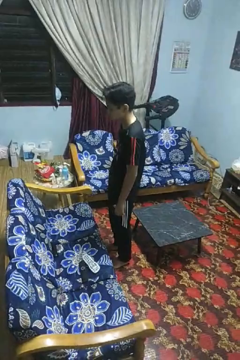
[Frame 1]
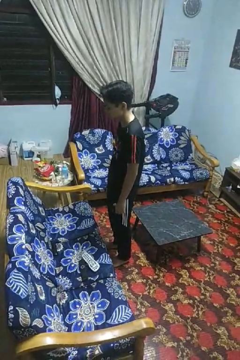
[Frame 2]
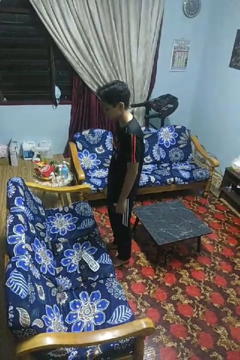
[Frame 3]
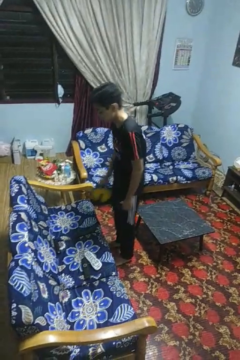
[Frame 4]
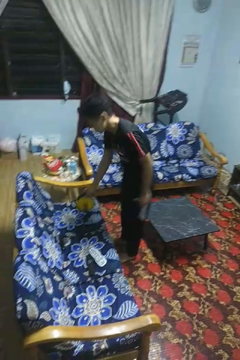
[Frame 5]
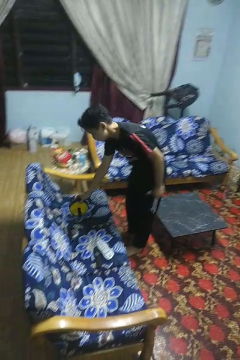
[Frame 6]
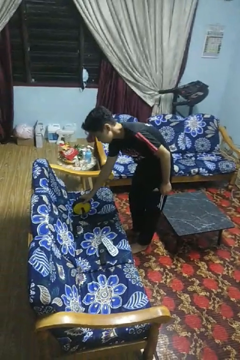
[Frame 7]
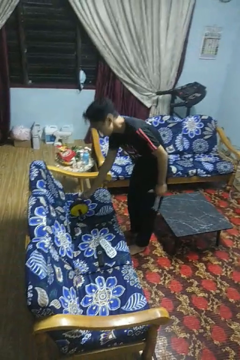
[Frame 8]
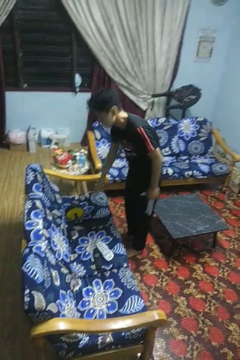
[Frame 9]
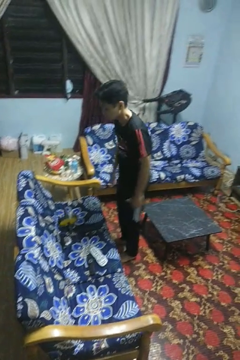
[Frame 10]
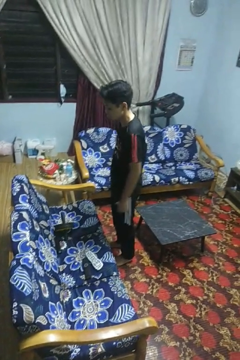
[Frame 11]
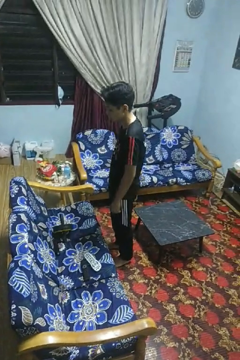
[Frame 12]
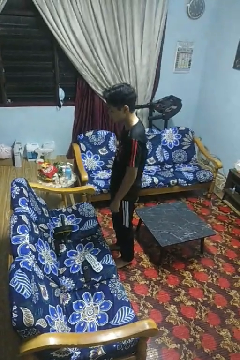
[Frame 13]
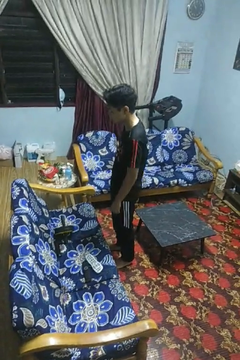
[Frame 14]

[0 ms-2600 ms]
person puts down object on couch

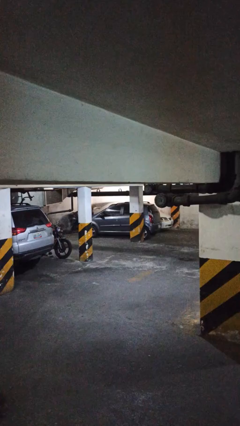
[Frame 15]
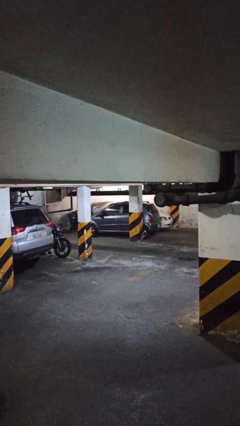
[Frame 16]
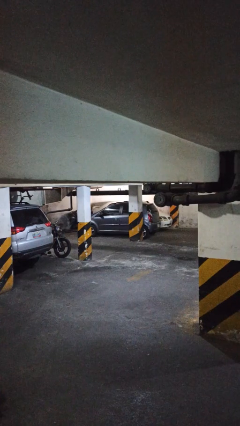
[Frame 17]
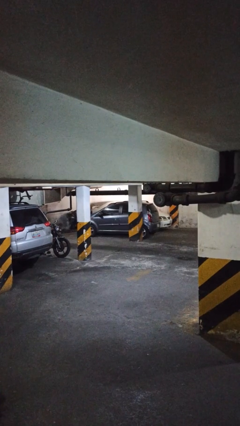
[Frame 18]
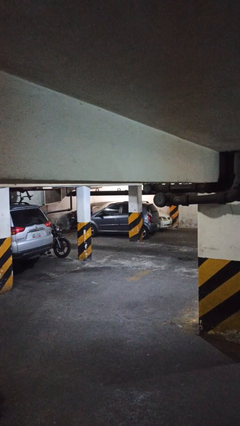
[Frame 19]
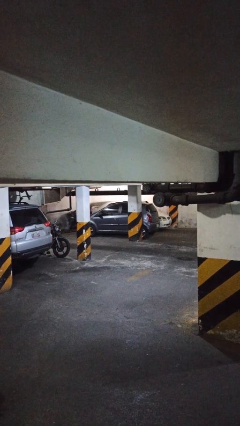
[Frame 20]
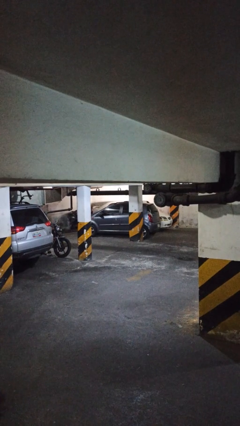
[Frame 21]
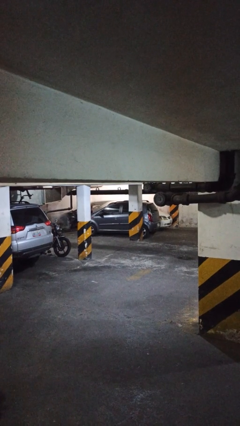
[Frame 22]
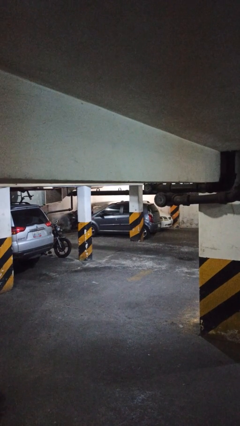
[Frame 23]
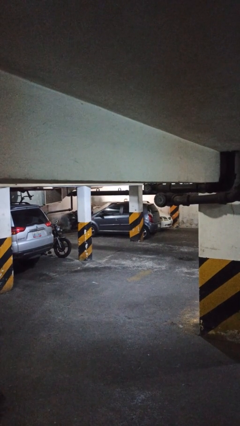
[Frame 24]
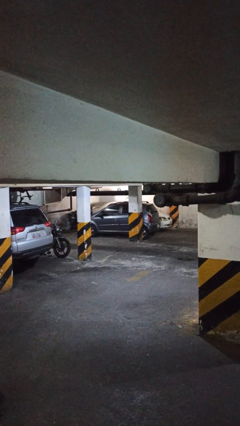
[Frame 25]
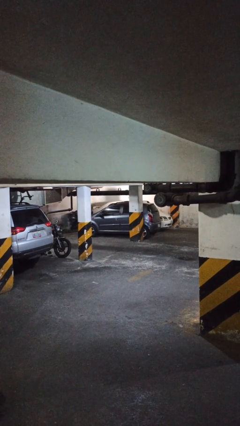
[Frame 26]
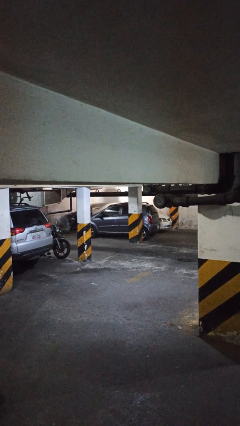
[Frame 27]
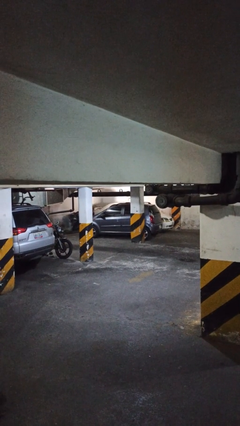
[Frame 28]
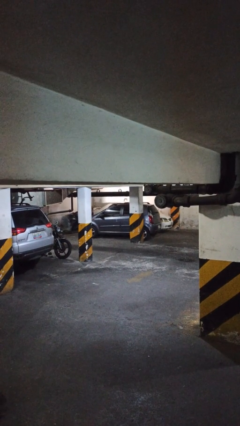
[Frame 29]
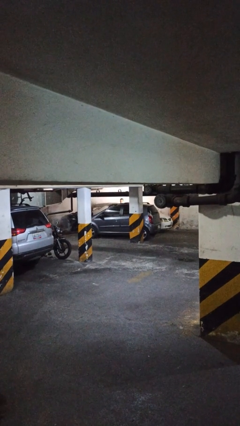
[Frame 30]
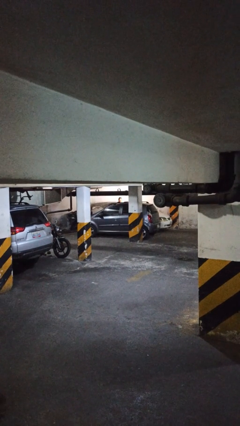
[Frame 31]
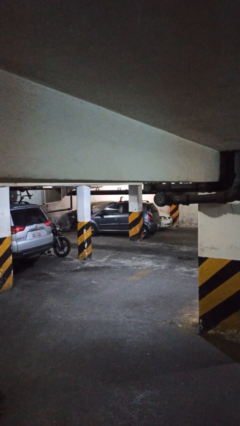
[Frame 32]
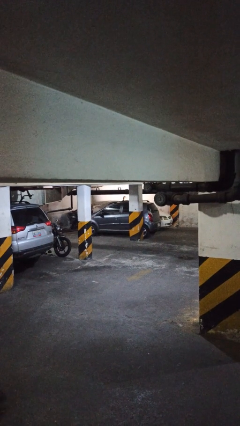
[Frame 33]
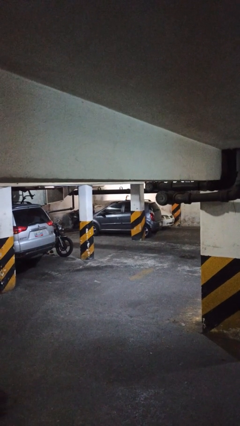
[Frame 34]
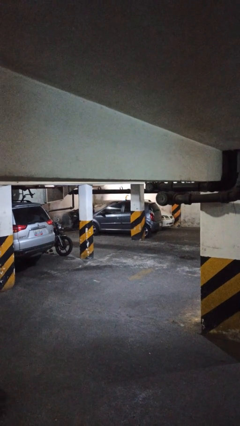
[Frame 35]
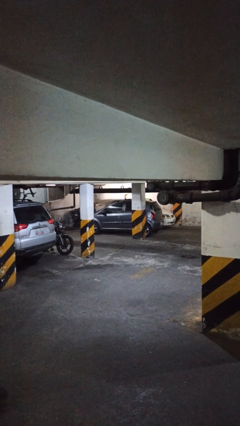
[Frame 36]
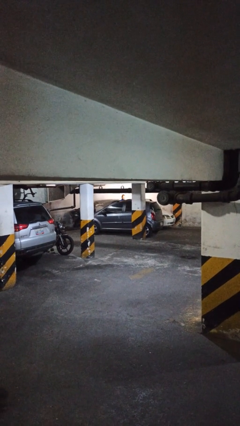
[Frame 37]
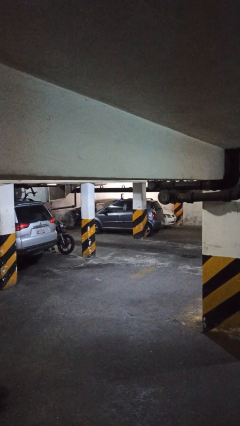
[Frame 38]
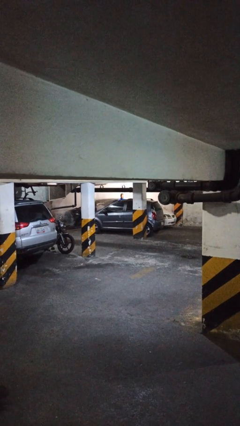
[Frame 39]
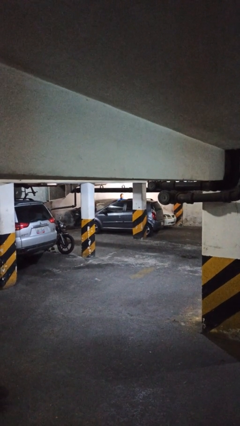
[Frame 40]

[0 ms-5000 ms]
car drops off person

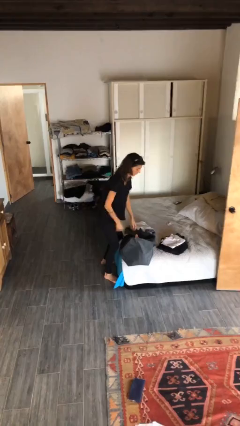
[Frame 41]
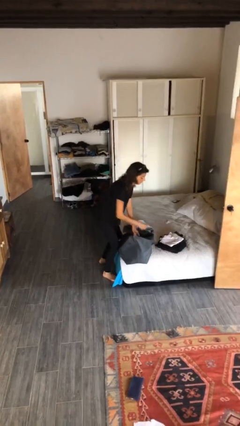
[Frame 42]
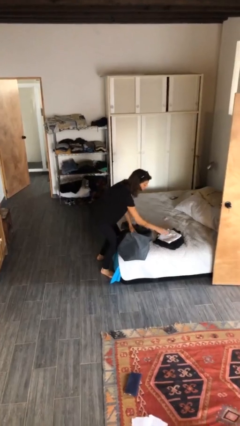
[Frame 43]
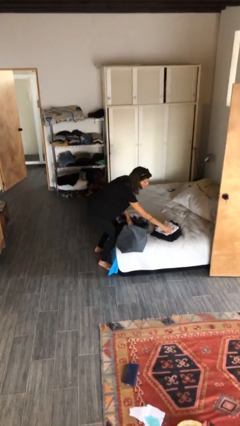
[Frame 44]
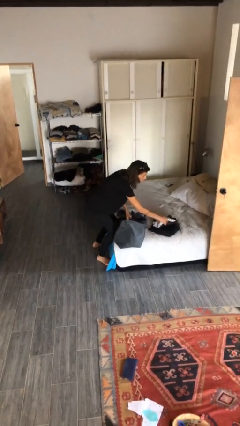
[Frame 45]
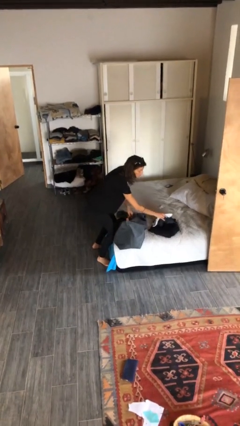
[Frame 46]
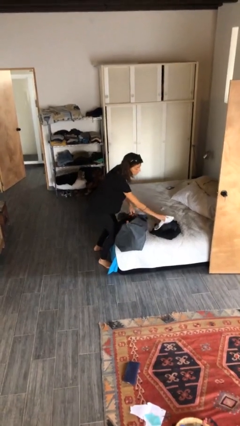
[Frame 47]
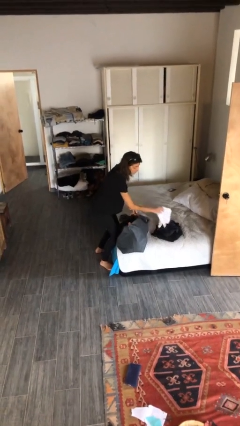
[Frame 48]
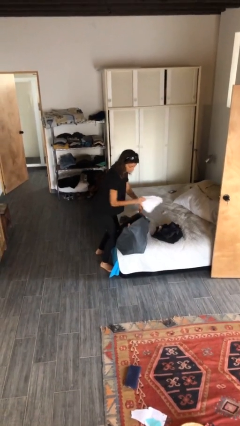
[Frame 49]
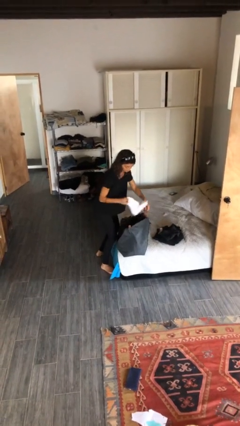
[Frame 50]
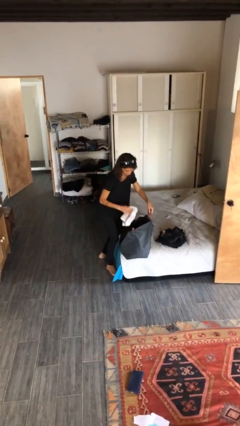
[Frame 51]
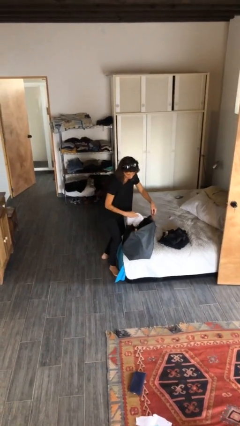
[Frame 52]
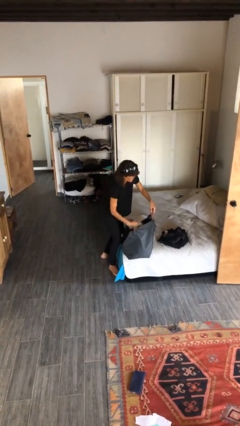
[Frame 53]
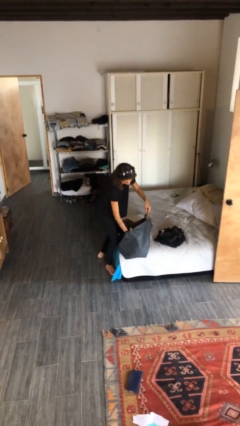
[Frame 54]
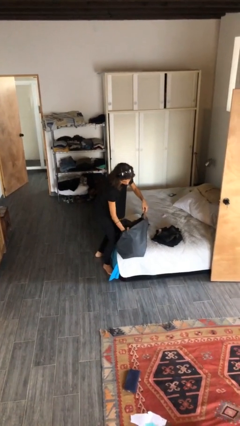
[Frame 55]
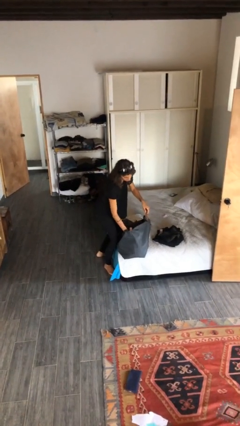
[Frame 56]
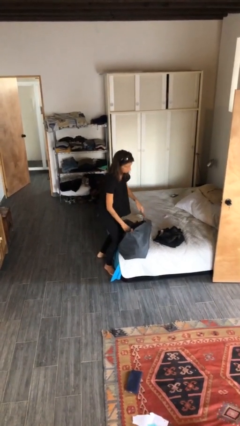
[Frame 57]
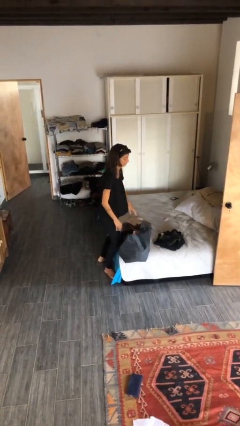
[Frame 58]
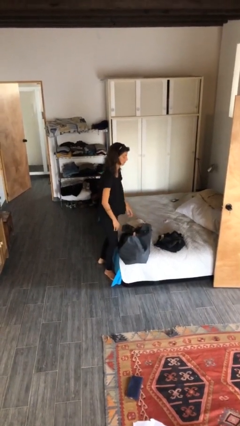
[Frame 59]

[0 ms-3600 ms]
person loads clothes into suitcase

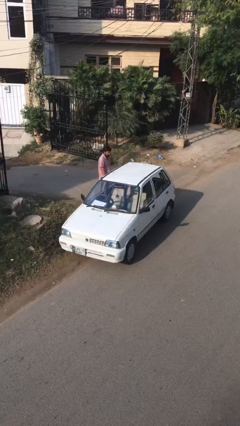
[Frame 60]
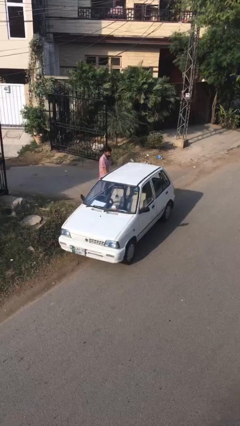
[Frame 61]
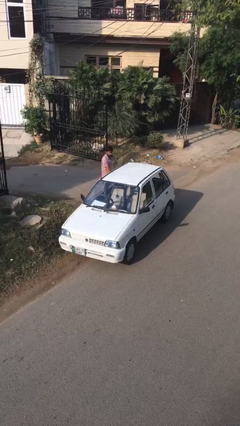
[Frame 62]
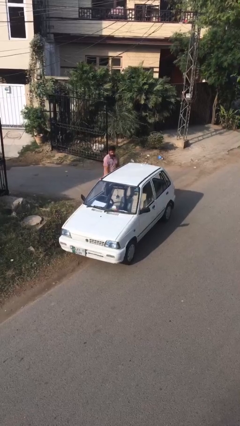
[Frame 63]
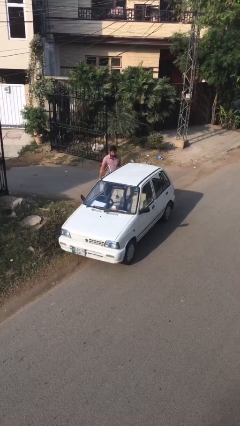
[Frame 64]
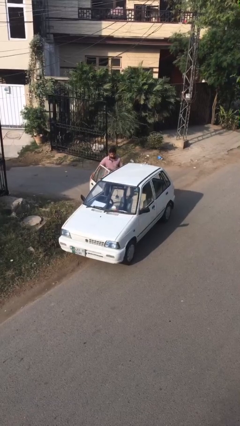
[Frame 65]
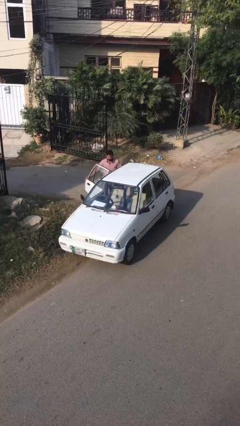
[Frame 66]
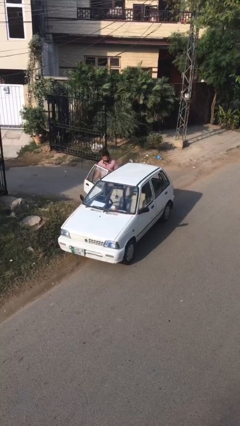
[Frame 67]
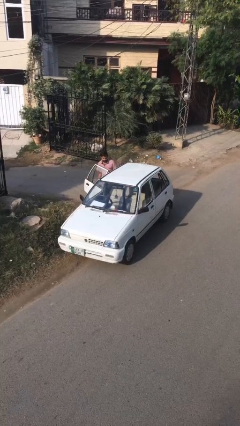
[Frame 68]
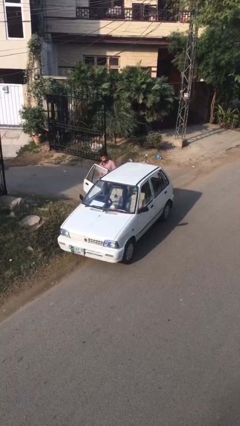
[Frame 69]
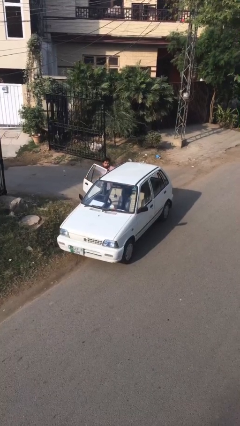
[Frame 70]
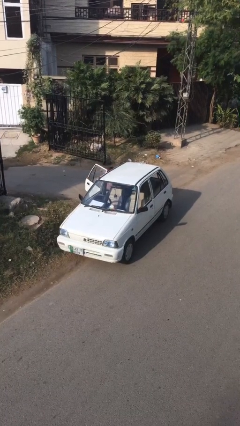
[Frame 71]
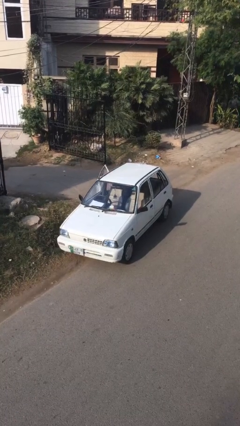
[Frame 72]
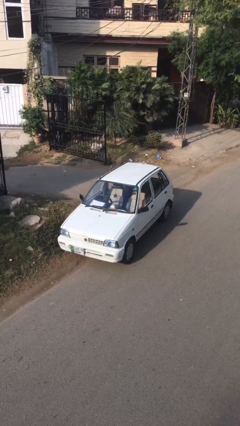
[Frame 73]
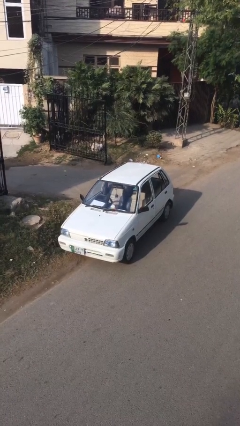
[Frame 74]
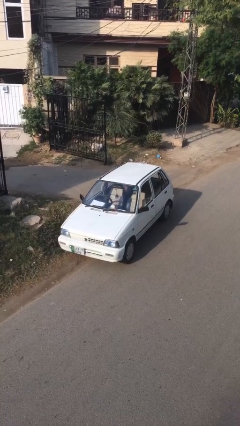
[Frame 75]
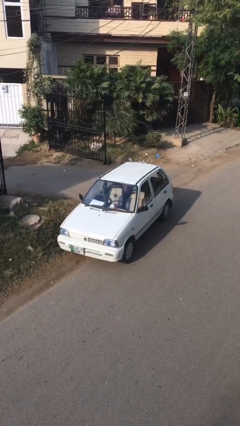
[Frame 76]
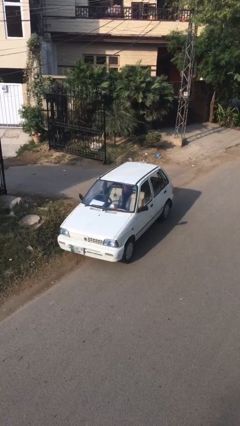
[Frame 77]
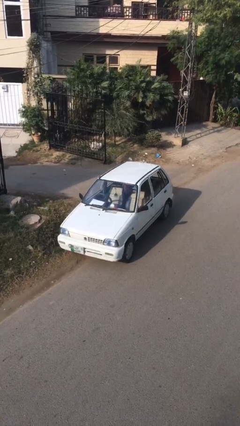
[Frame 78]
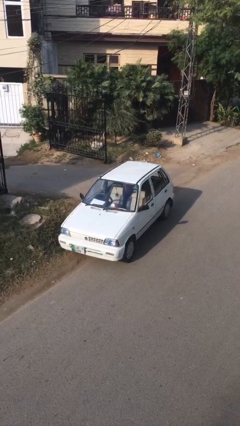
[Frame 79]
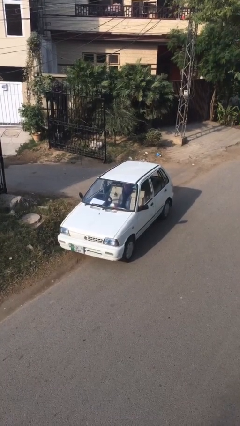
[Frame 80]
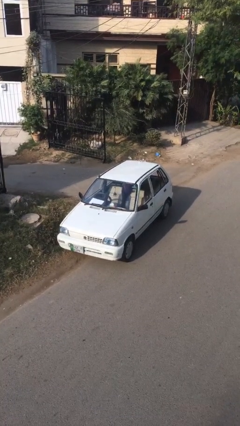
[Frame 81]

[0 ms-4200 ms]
car picks up person

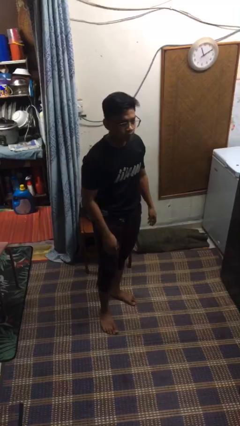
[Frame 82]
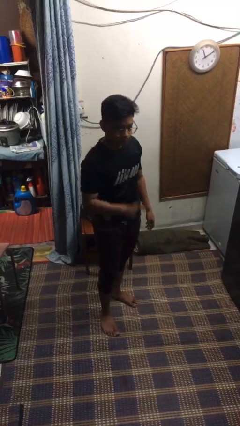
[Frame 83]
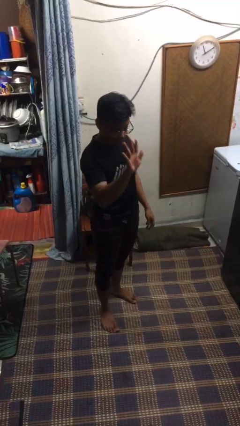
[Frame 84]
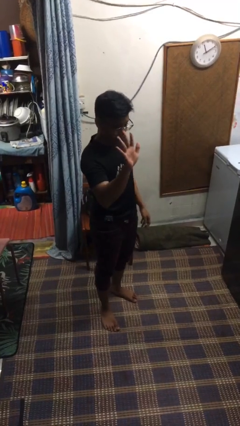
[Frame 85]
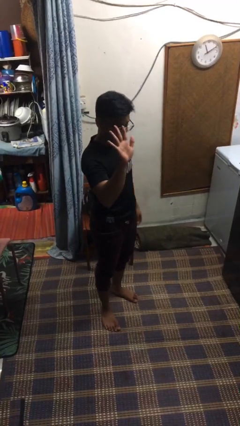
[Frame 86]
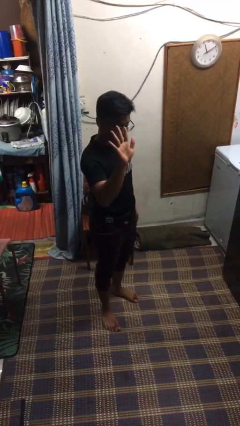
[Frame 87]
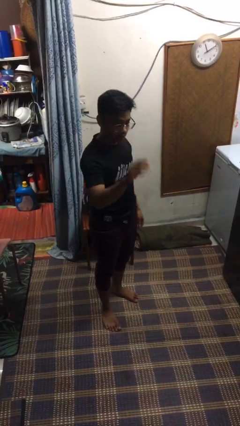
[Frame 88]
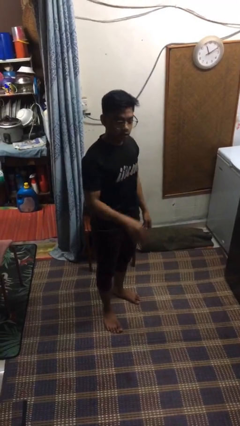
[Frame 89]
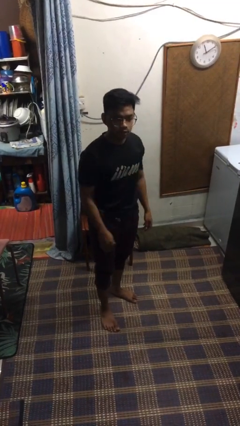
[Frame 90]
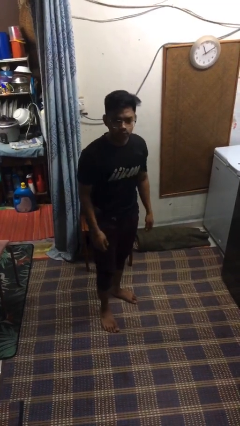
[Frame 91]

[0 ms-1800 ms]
person gestures stop

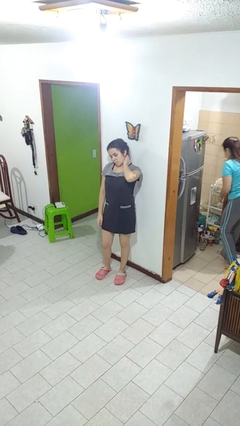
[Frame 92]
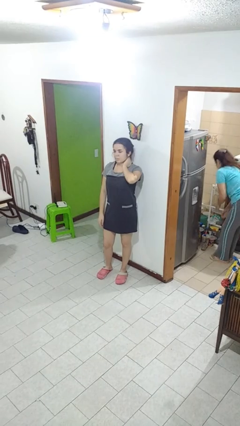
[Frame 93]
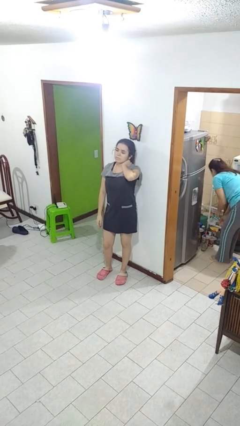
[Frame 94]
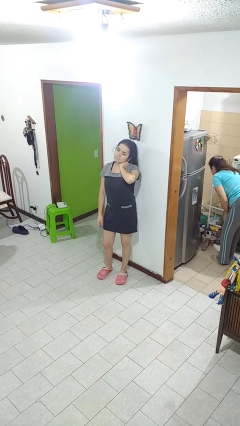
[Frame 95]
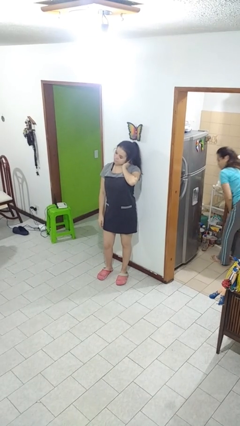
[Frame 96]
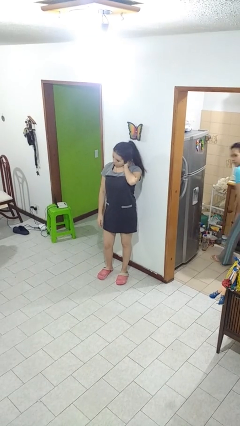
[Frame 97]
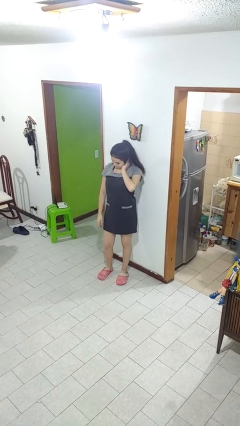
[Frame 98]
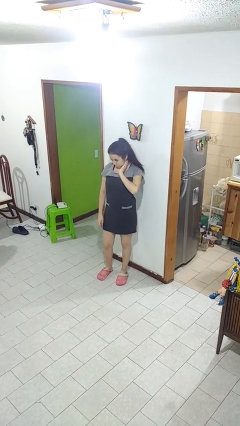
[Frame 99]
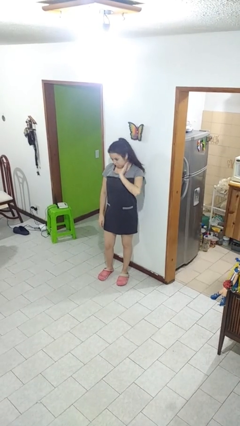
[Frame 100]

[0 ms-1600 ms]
person rubs neck
